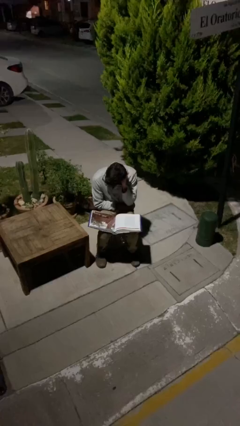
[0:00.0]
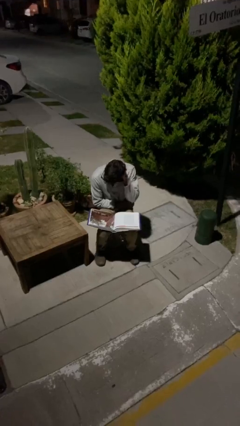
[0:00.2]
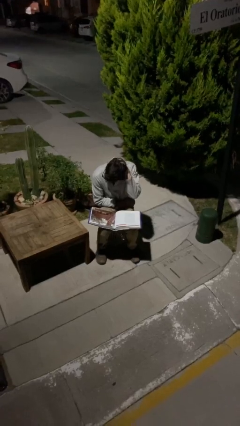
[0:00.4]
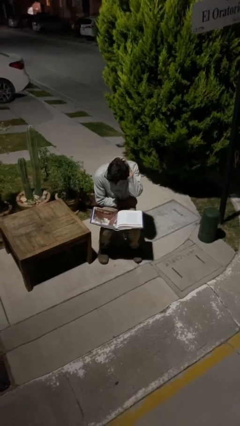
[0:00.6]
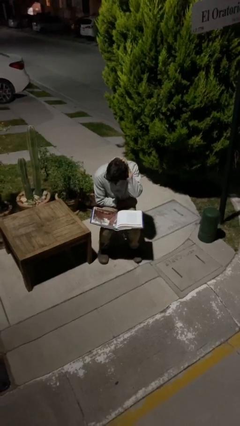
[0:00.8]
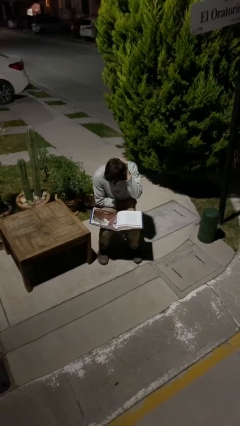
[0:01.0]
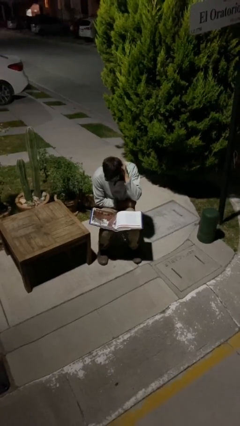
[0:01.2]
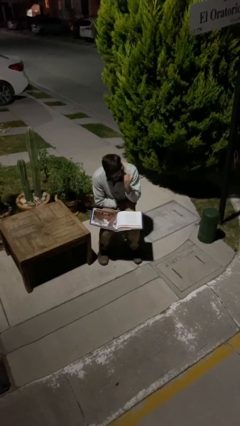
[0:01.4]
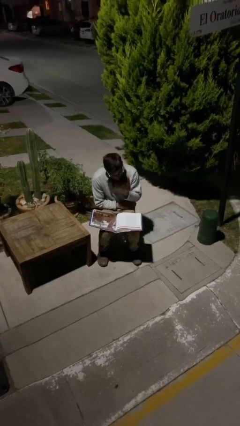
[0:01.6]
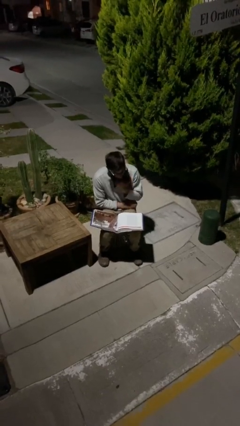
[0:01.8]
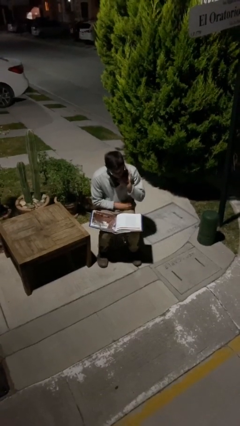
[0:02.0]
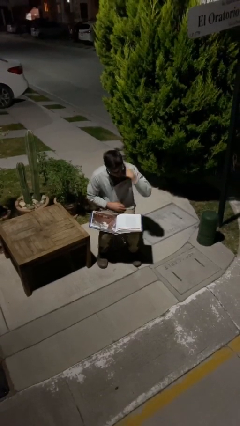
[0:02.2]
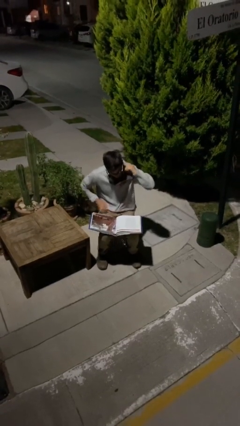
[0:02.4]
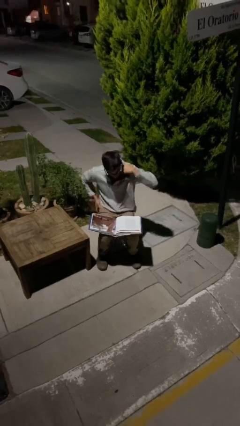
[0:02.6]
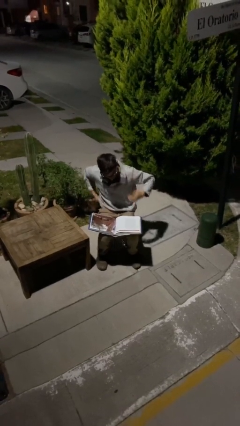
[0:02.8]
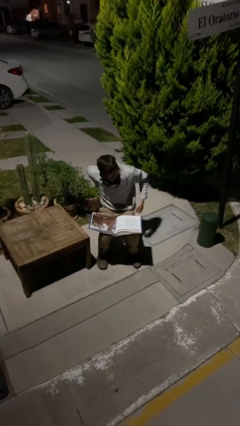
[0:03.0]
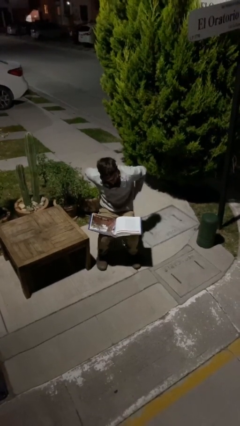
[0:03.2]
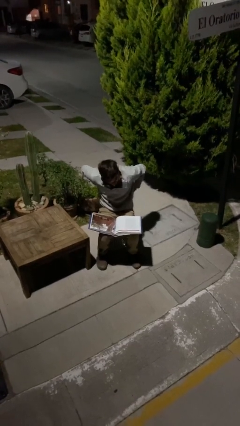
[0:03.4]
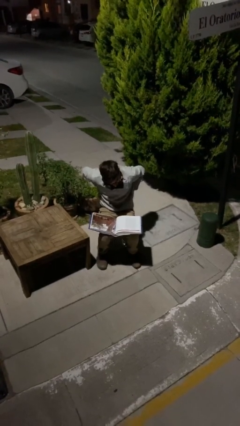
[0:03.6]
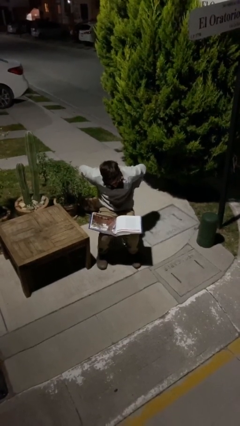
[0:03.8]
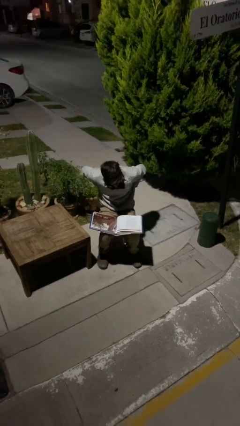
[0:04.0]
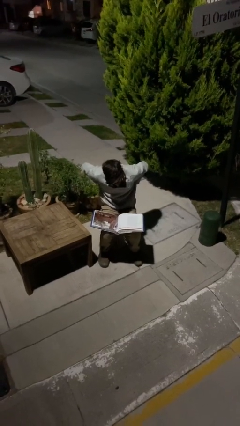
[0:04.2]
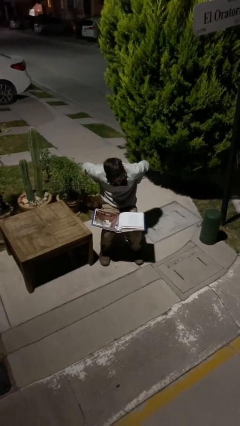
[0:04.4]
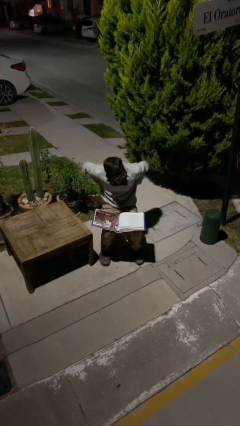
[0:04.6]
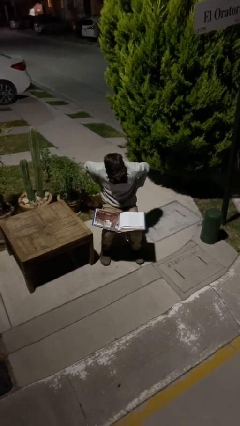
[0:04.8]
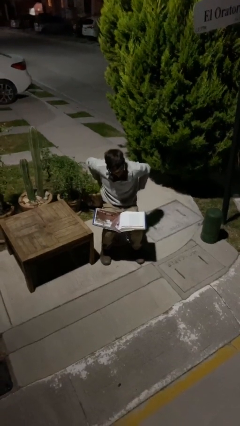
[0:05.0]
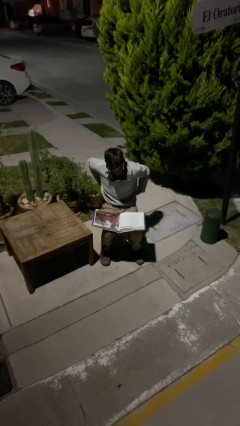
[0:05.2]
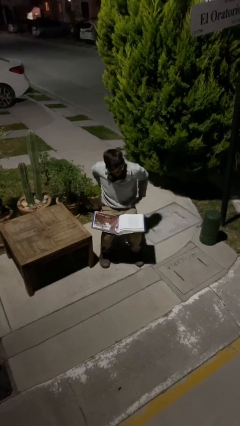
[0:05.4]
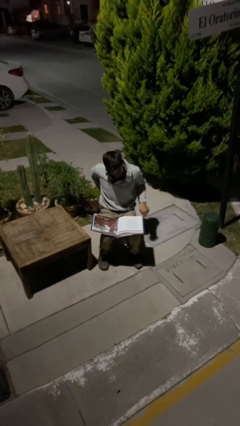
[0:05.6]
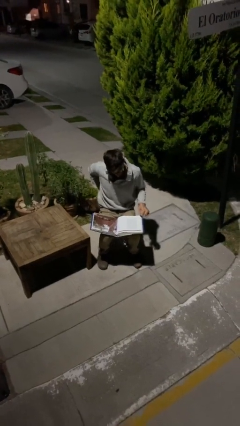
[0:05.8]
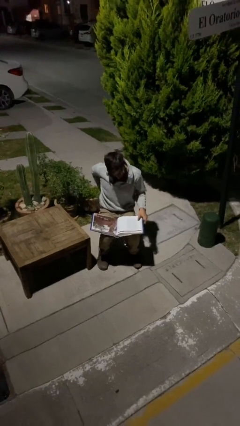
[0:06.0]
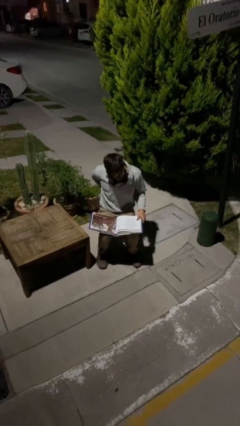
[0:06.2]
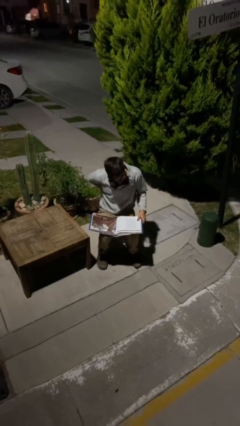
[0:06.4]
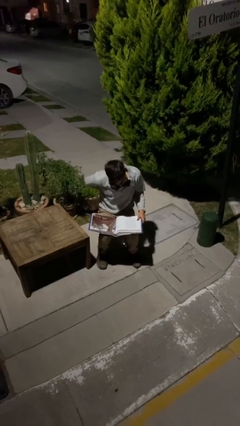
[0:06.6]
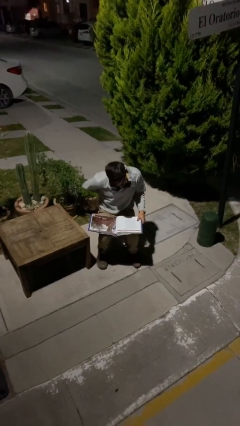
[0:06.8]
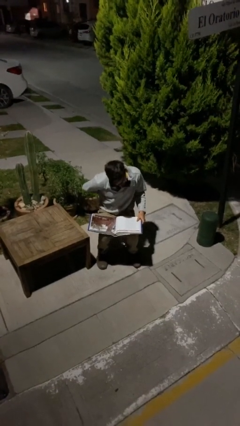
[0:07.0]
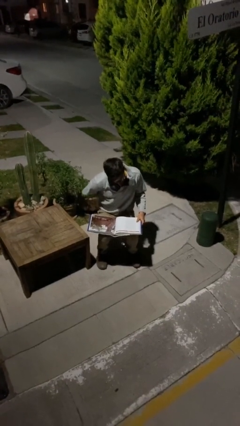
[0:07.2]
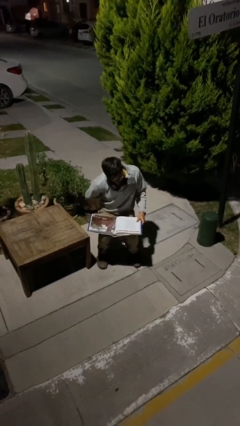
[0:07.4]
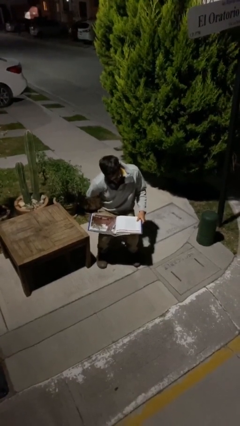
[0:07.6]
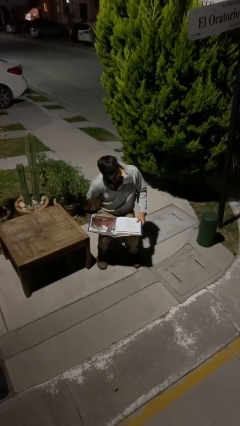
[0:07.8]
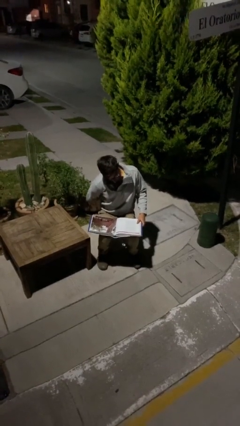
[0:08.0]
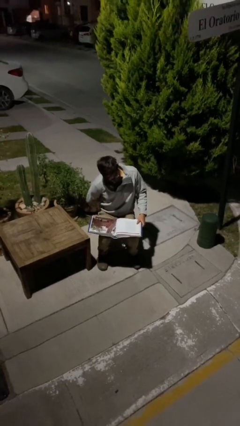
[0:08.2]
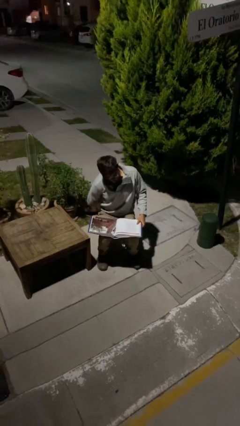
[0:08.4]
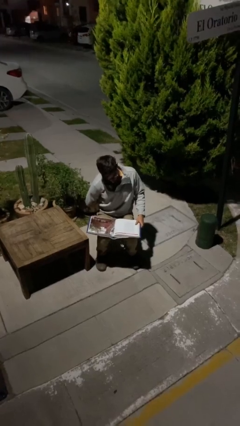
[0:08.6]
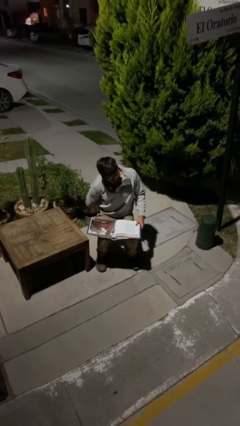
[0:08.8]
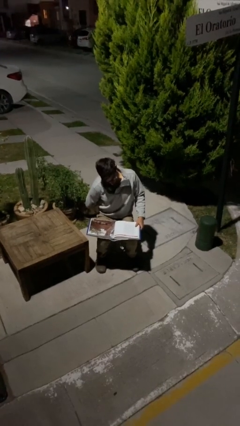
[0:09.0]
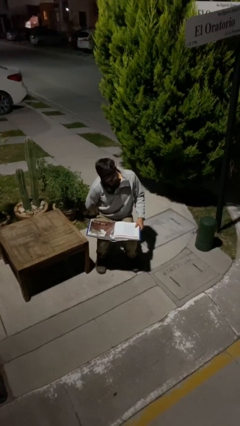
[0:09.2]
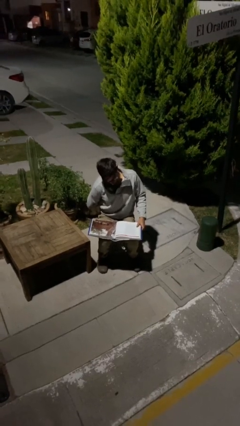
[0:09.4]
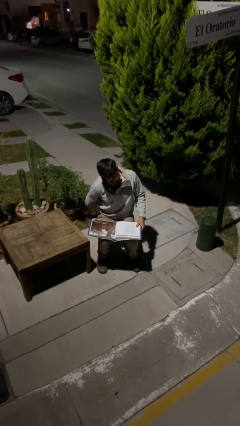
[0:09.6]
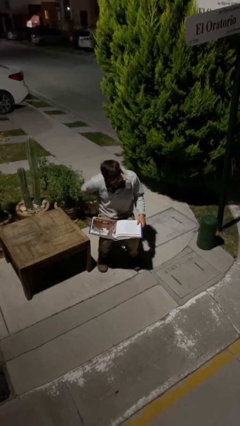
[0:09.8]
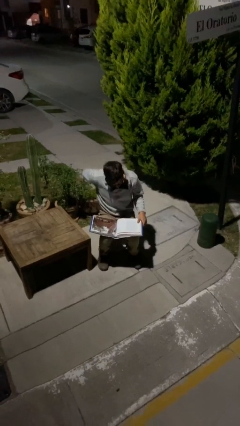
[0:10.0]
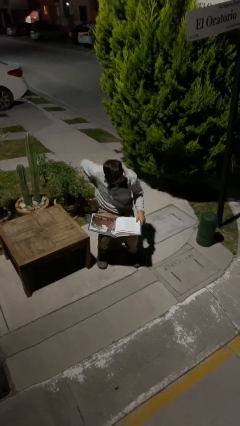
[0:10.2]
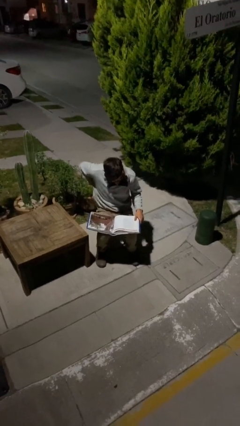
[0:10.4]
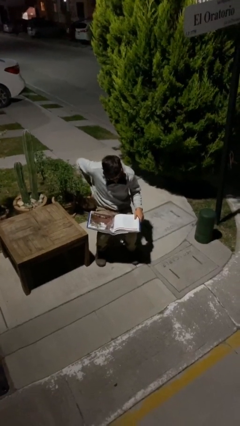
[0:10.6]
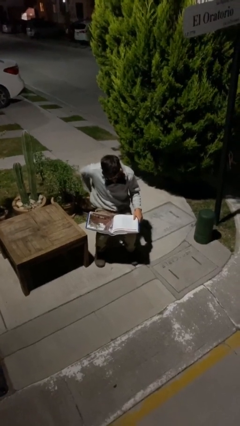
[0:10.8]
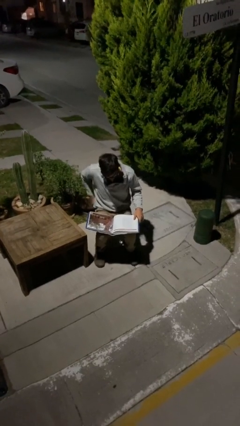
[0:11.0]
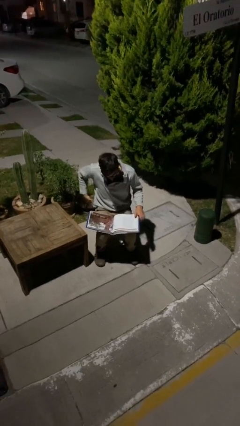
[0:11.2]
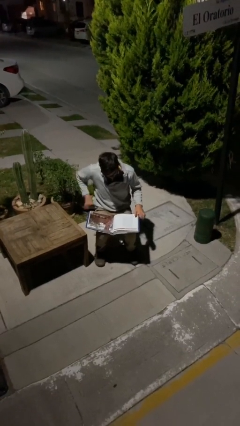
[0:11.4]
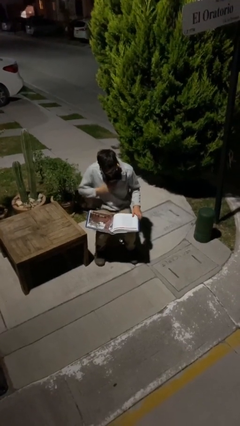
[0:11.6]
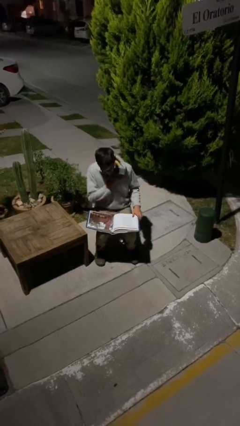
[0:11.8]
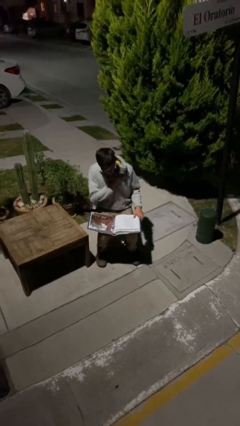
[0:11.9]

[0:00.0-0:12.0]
person reads document

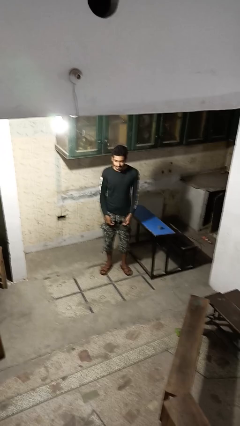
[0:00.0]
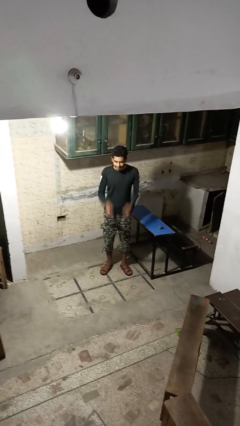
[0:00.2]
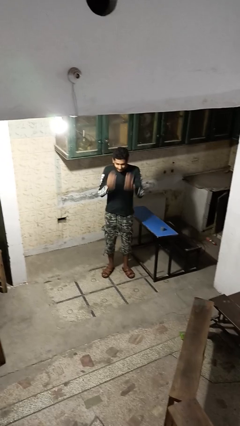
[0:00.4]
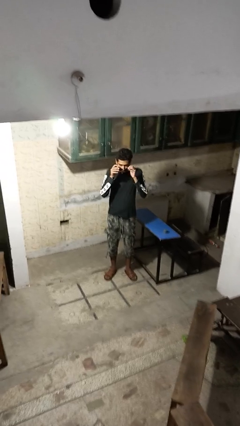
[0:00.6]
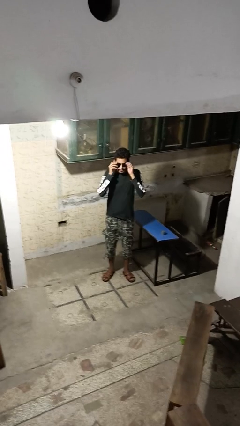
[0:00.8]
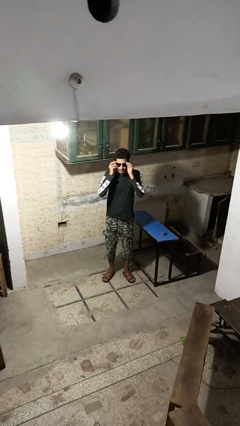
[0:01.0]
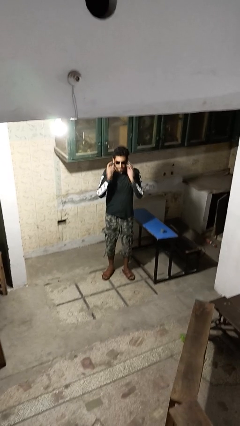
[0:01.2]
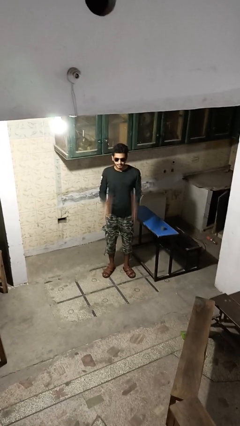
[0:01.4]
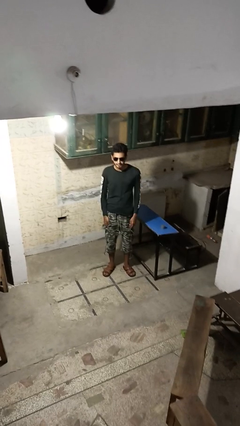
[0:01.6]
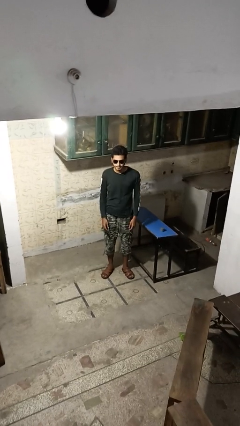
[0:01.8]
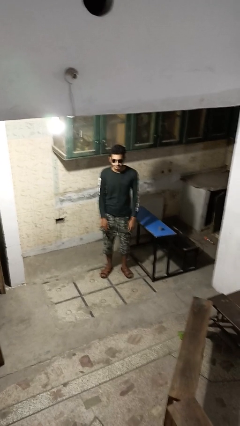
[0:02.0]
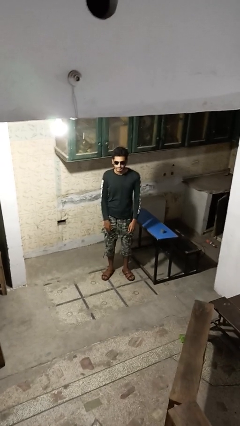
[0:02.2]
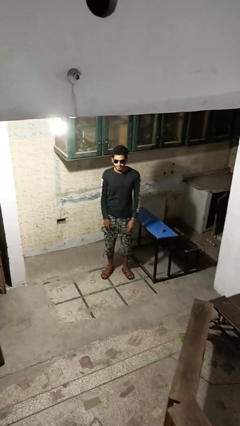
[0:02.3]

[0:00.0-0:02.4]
person puts on sunglasses

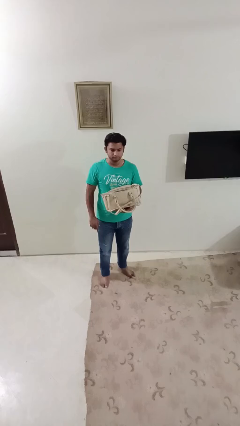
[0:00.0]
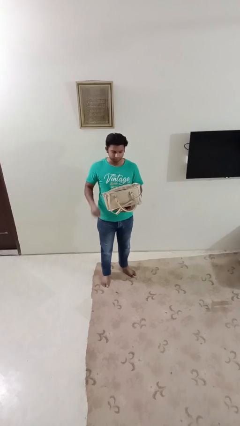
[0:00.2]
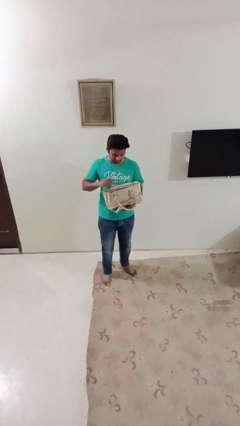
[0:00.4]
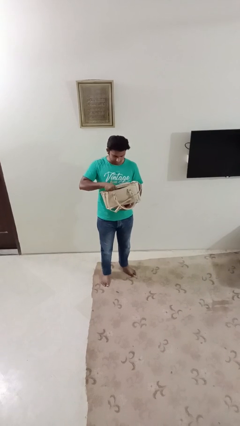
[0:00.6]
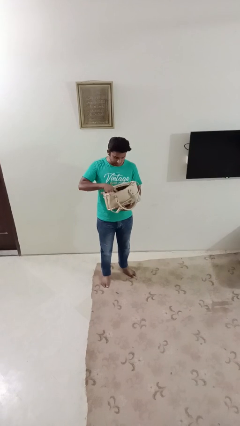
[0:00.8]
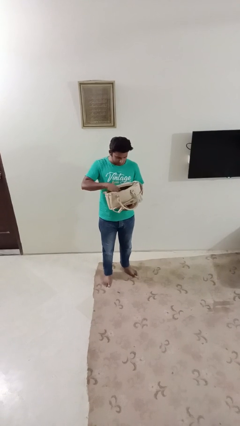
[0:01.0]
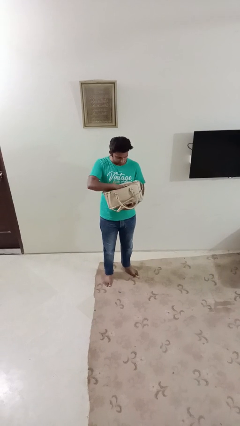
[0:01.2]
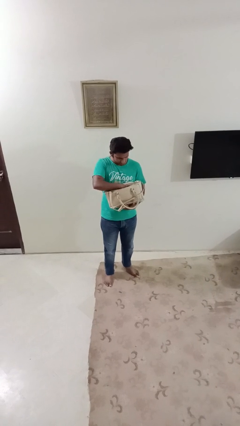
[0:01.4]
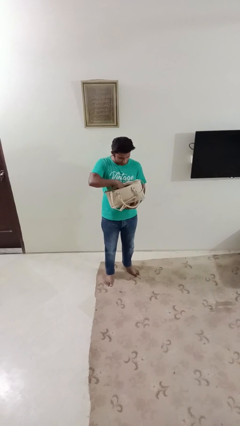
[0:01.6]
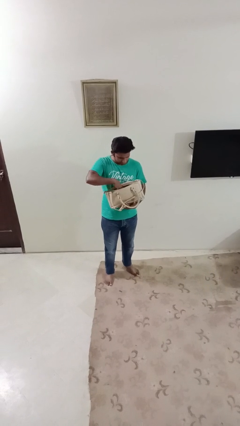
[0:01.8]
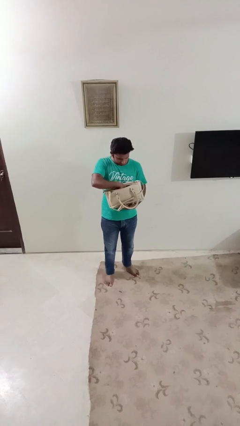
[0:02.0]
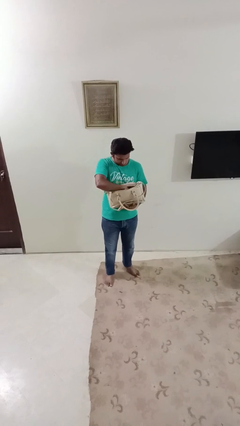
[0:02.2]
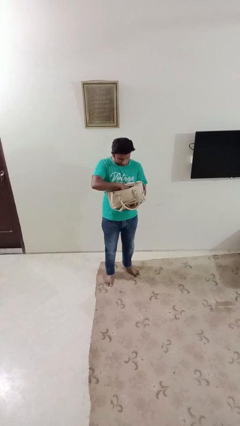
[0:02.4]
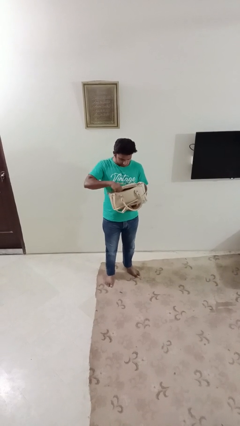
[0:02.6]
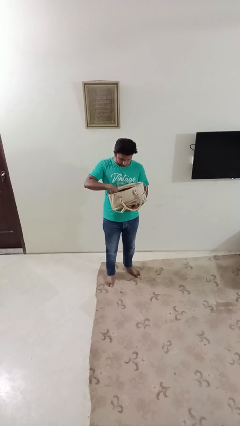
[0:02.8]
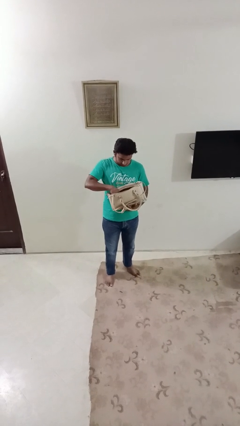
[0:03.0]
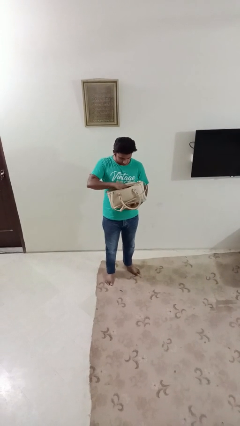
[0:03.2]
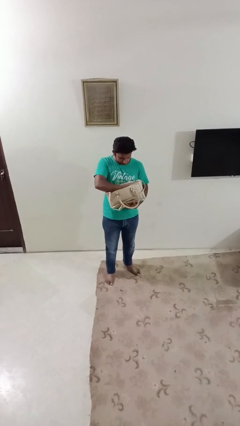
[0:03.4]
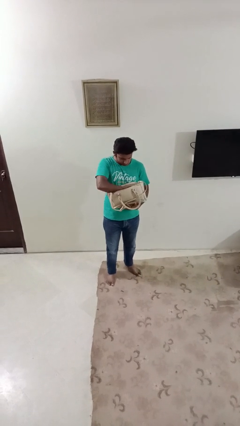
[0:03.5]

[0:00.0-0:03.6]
person searches in purse

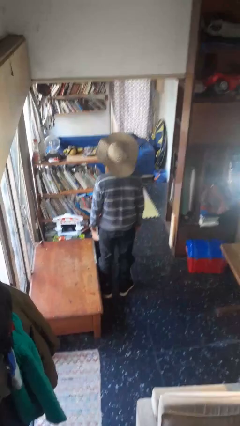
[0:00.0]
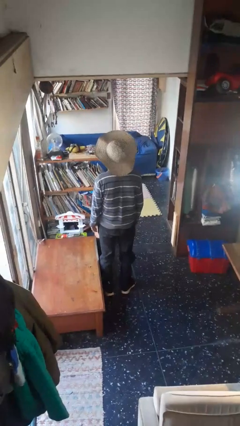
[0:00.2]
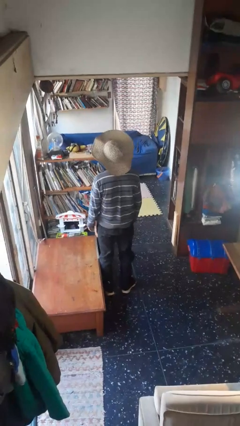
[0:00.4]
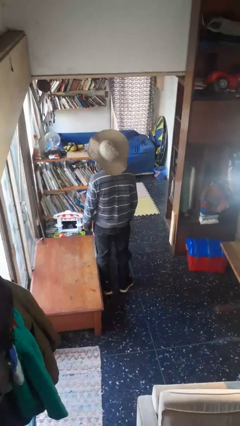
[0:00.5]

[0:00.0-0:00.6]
person puts on hat
